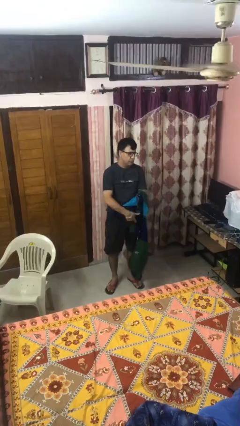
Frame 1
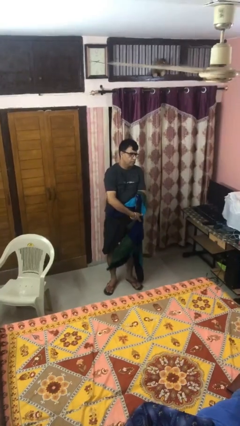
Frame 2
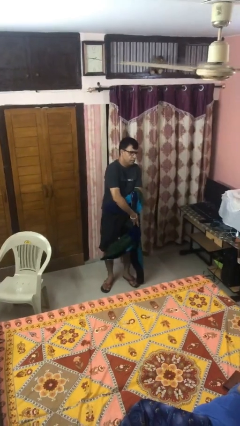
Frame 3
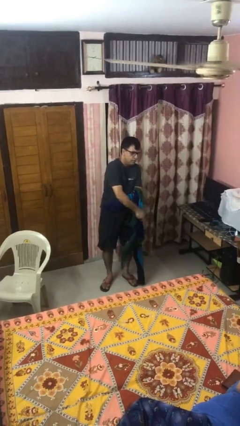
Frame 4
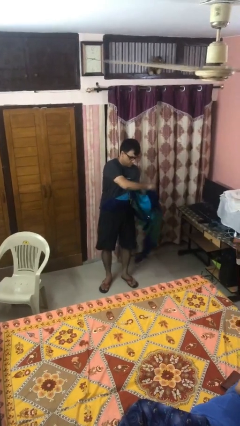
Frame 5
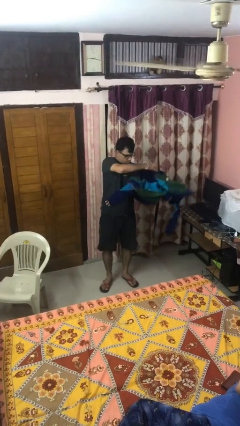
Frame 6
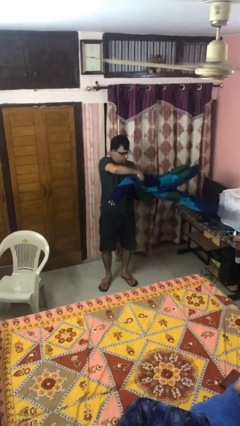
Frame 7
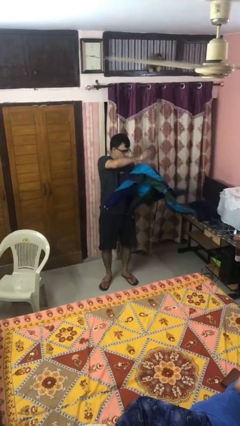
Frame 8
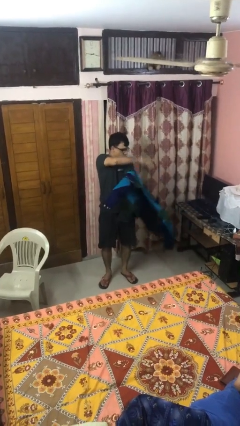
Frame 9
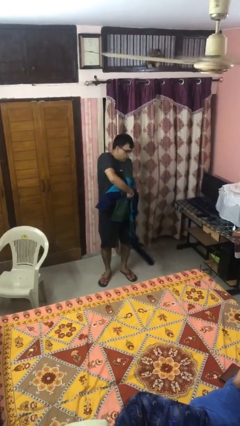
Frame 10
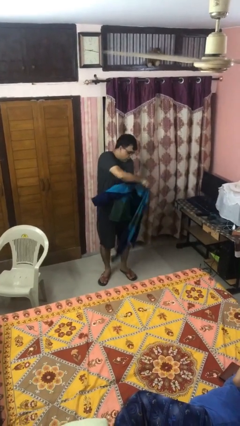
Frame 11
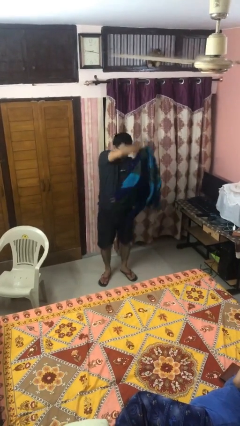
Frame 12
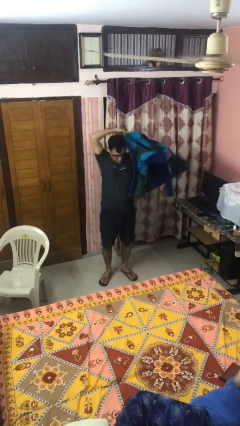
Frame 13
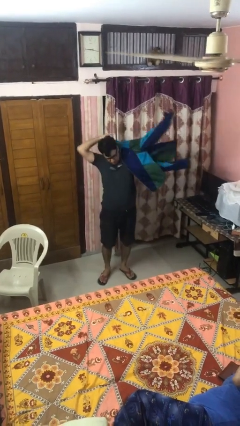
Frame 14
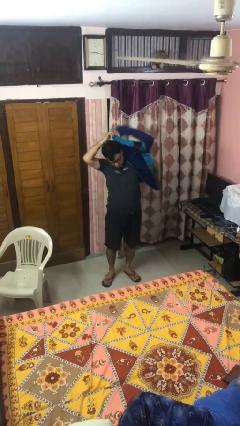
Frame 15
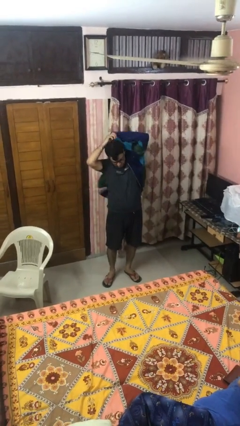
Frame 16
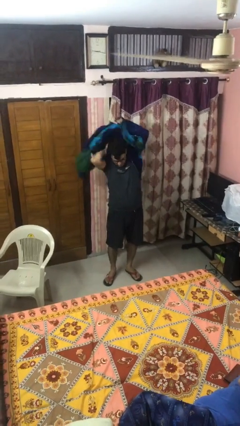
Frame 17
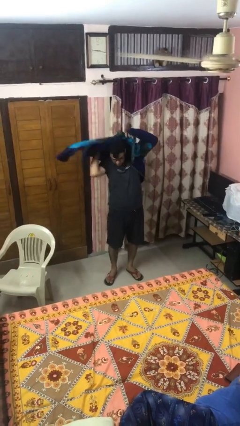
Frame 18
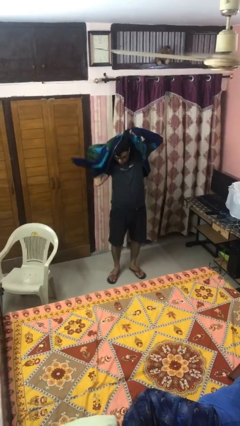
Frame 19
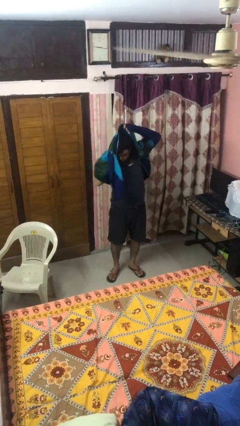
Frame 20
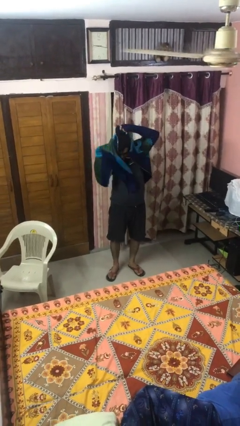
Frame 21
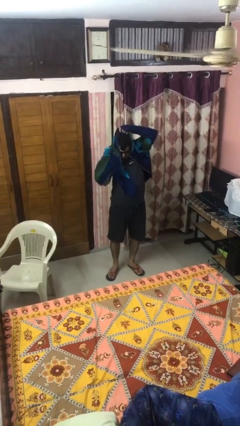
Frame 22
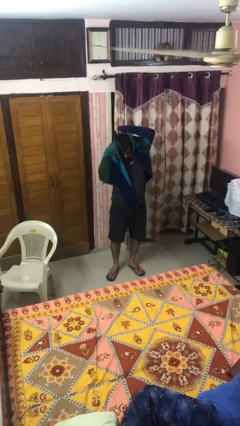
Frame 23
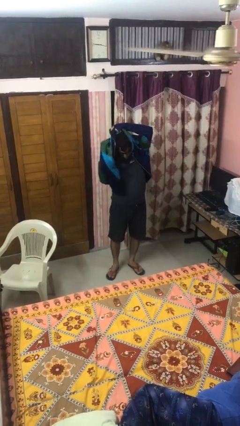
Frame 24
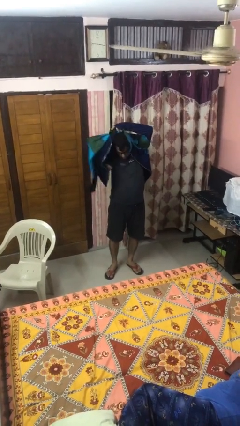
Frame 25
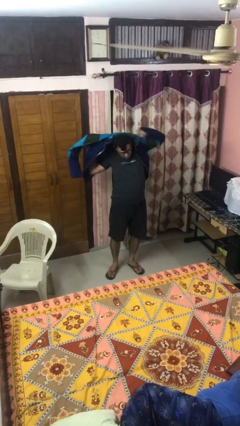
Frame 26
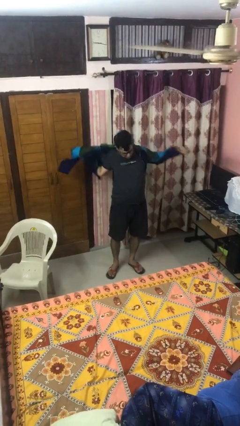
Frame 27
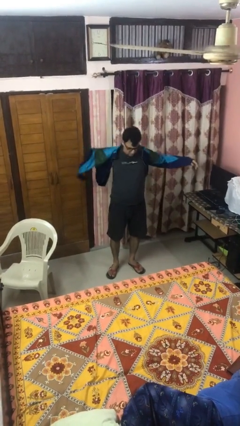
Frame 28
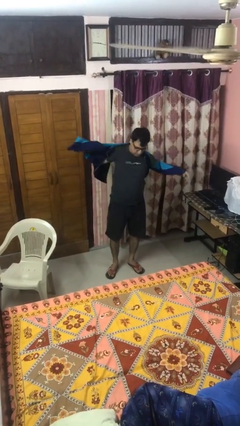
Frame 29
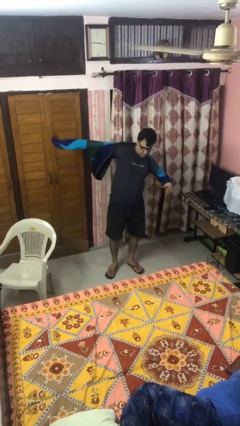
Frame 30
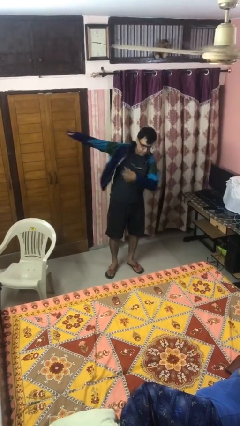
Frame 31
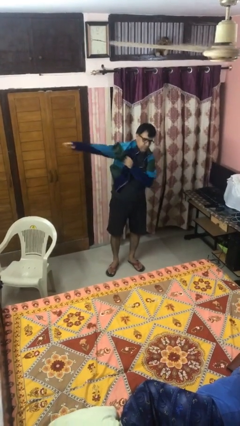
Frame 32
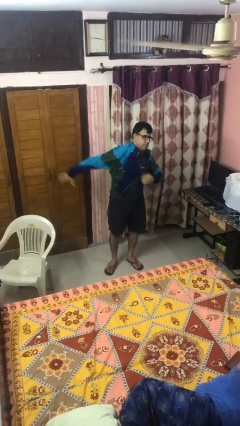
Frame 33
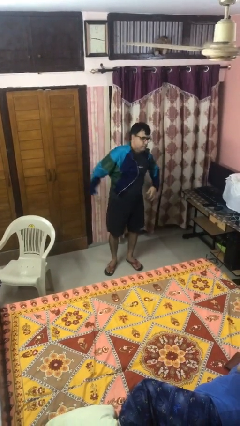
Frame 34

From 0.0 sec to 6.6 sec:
person puts on jacket

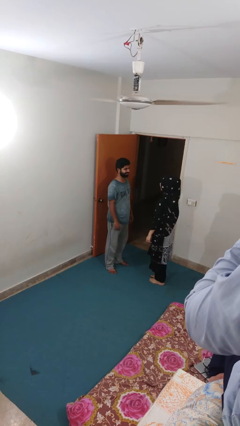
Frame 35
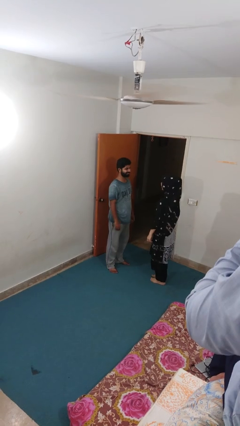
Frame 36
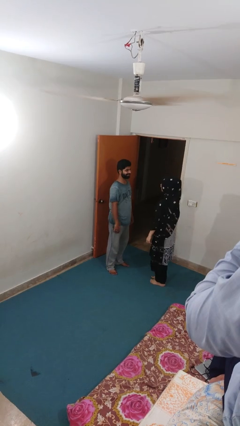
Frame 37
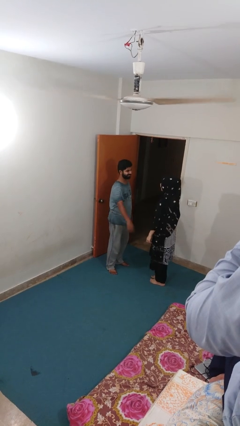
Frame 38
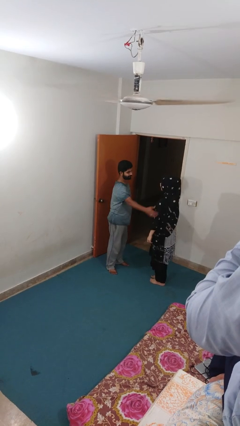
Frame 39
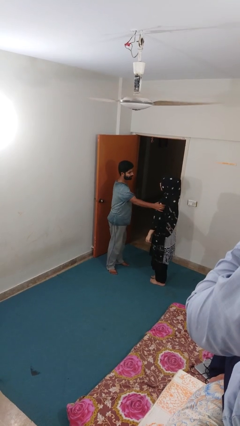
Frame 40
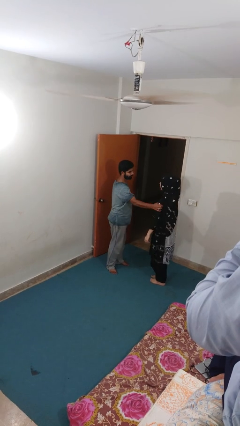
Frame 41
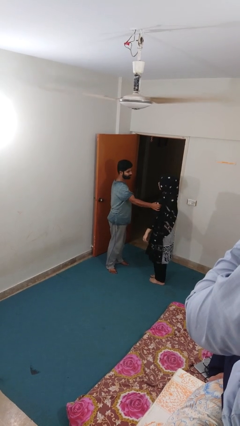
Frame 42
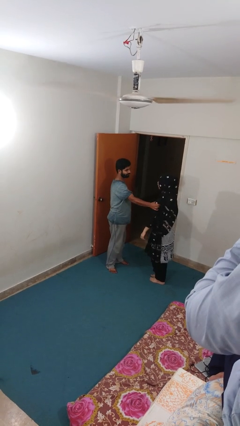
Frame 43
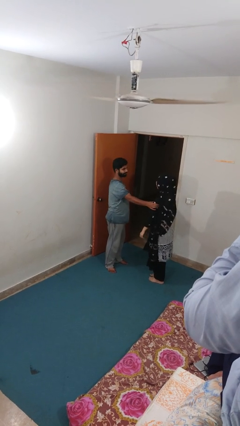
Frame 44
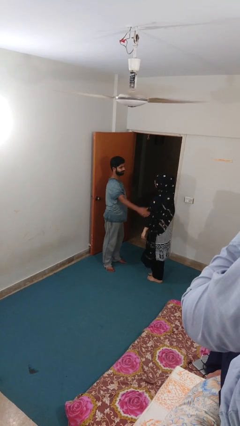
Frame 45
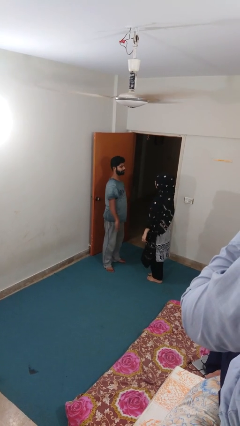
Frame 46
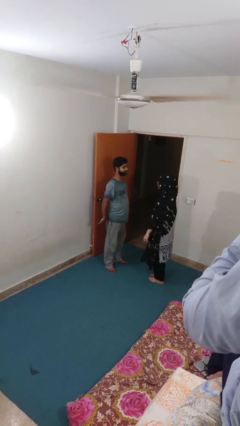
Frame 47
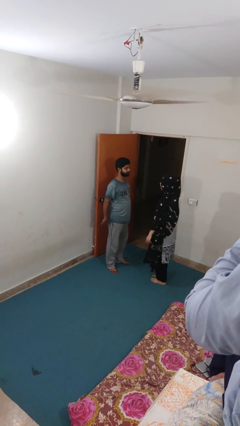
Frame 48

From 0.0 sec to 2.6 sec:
person grabs person by bicep

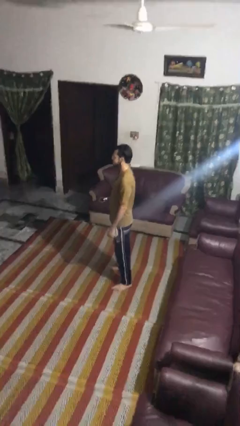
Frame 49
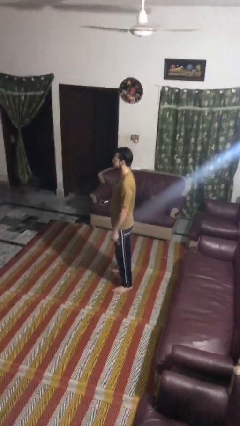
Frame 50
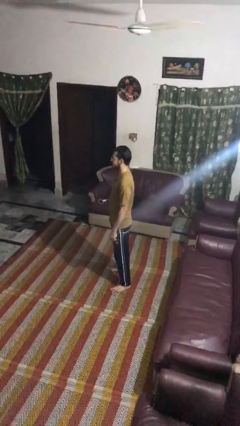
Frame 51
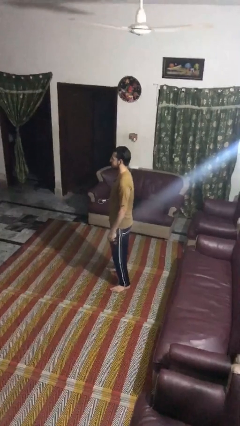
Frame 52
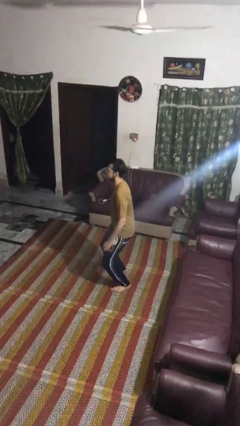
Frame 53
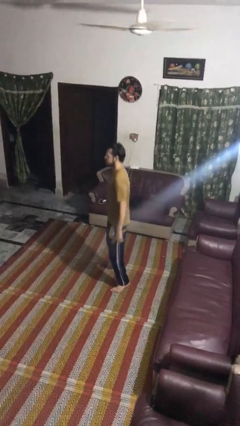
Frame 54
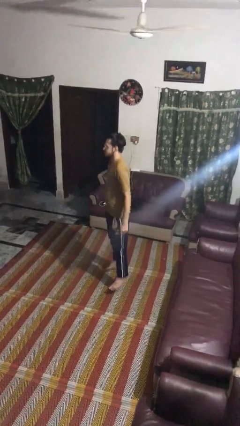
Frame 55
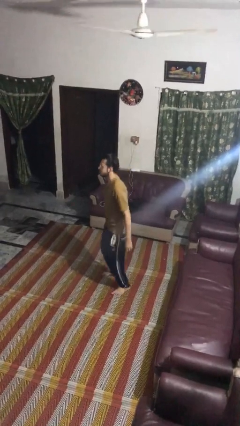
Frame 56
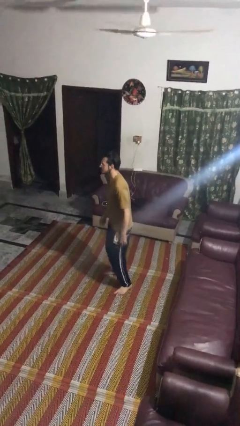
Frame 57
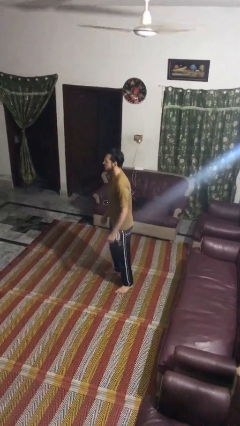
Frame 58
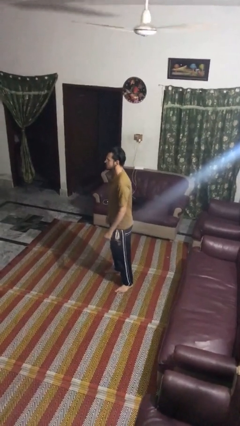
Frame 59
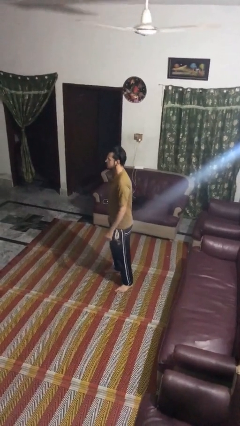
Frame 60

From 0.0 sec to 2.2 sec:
person jumps

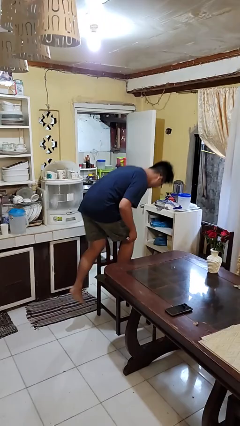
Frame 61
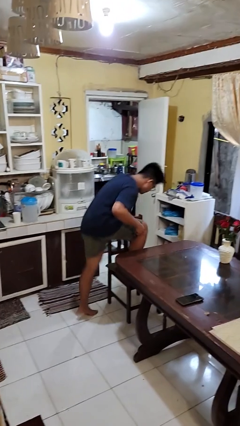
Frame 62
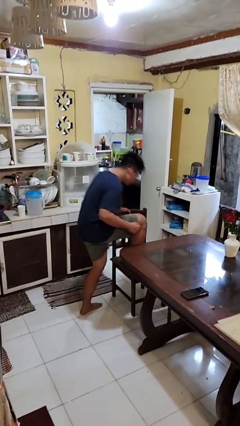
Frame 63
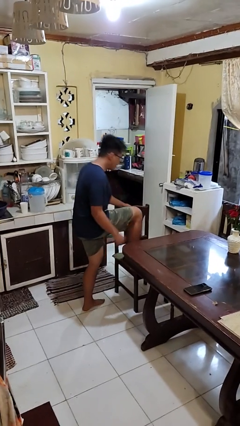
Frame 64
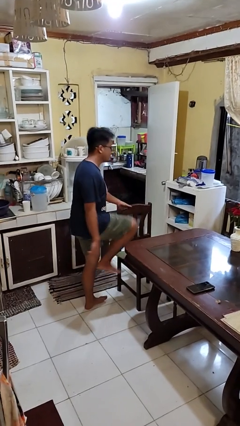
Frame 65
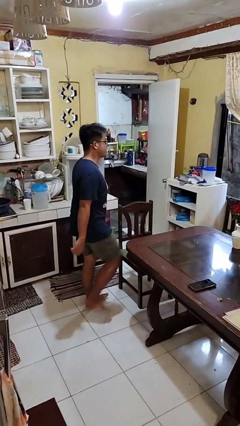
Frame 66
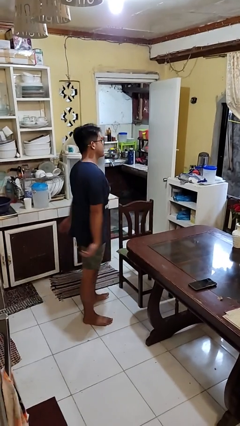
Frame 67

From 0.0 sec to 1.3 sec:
person climbs off chair

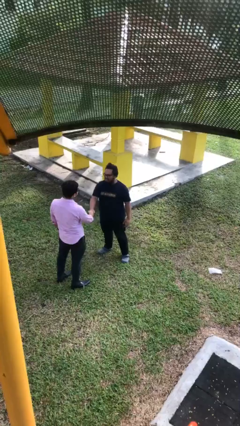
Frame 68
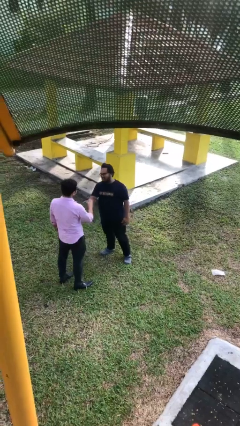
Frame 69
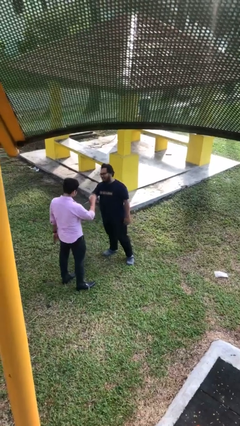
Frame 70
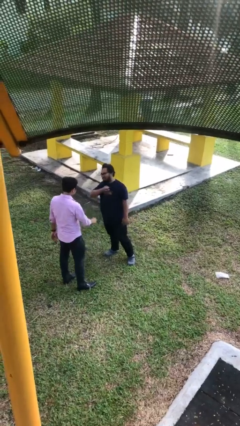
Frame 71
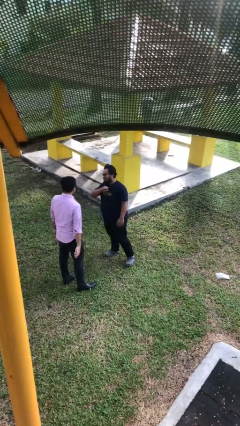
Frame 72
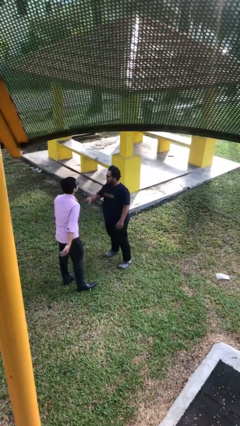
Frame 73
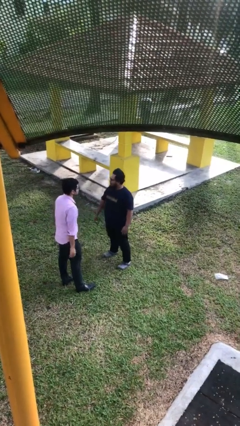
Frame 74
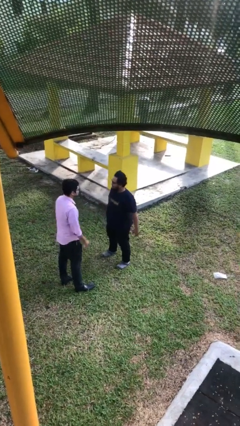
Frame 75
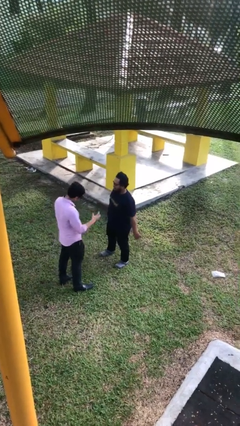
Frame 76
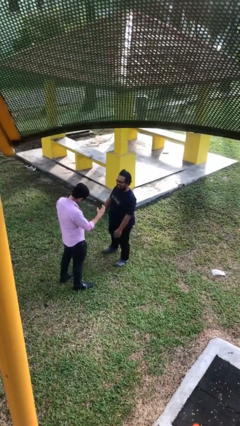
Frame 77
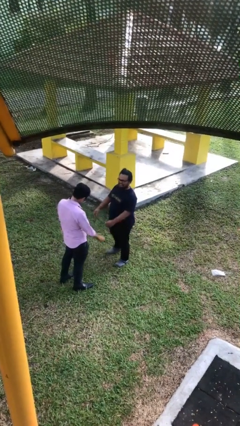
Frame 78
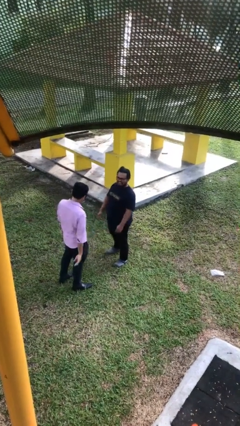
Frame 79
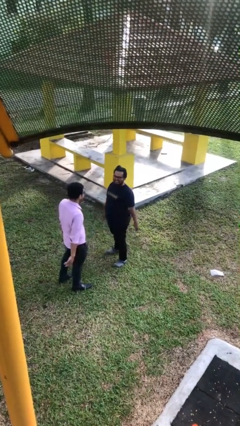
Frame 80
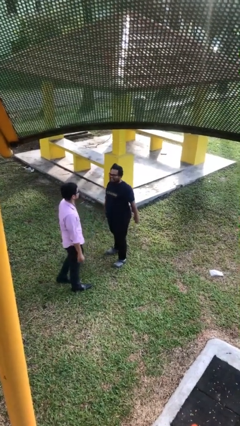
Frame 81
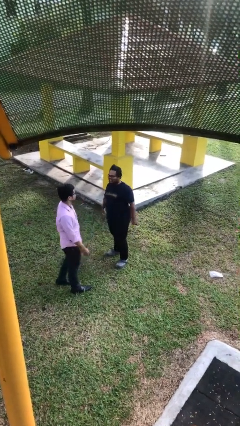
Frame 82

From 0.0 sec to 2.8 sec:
person talks to person

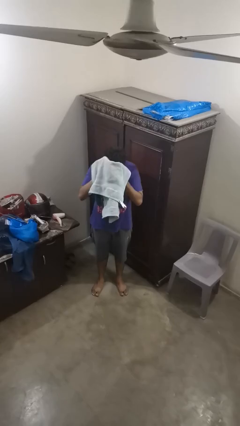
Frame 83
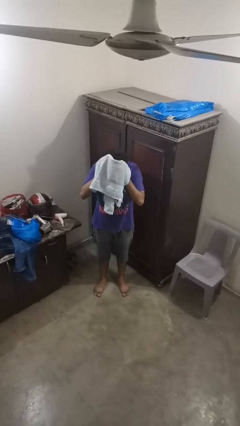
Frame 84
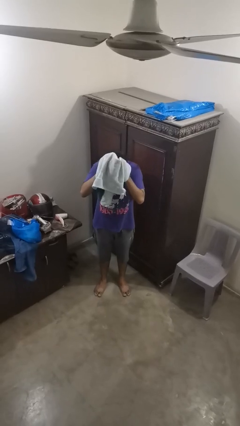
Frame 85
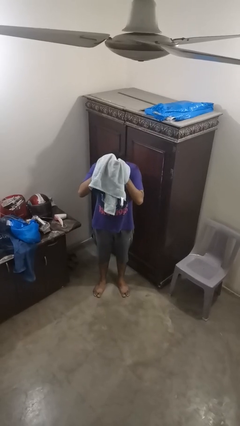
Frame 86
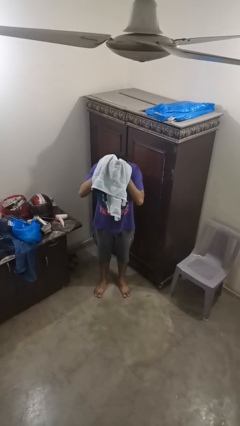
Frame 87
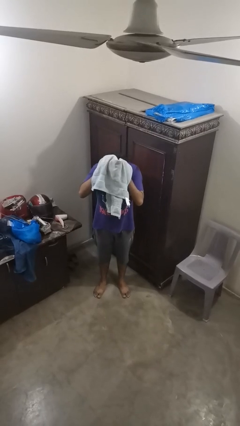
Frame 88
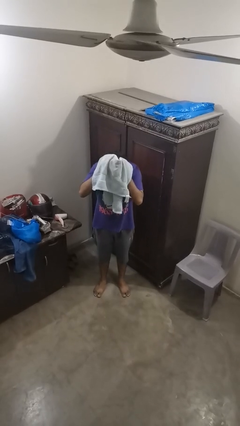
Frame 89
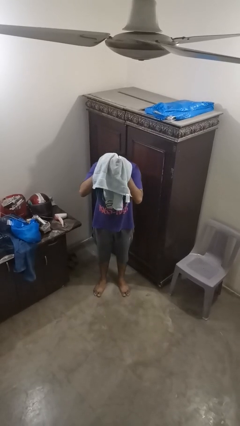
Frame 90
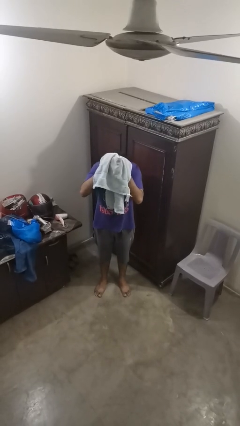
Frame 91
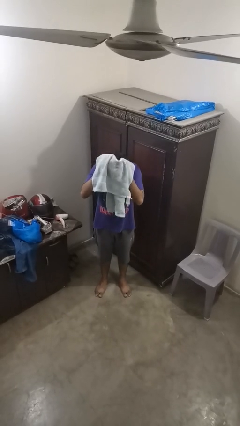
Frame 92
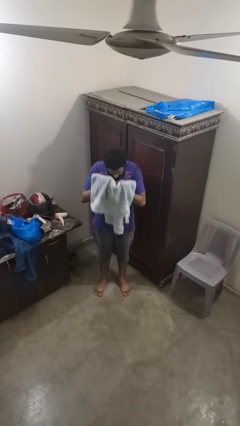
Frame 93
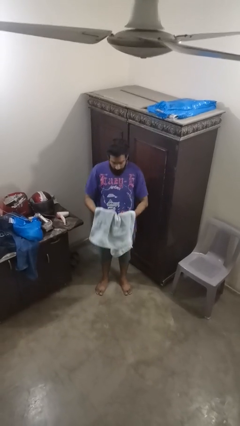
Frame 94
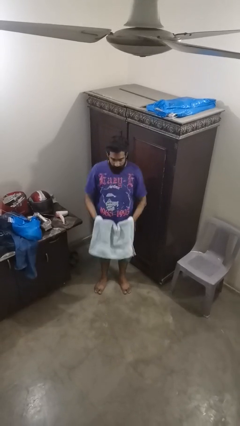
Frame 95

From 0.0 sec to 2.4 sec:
person dries hair with towel
